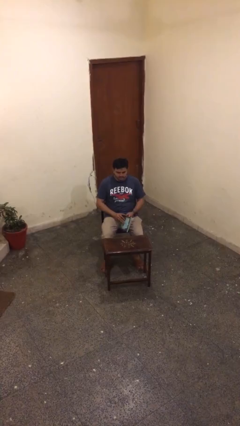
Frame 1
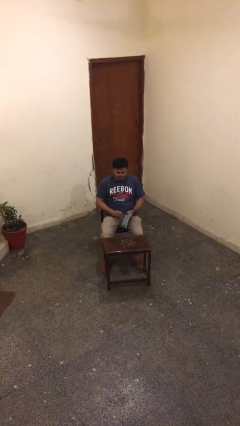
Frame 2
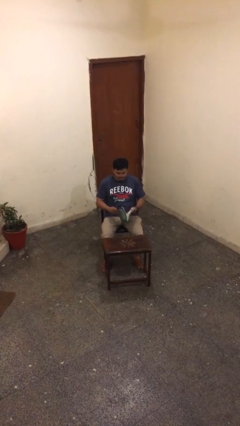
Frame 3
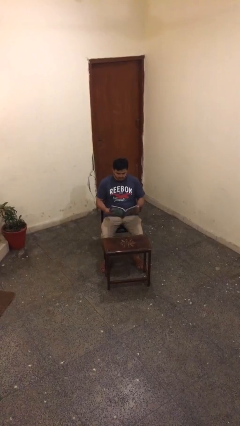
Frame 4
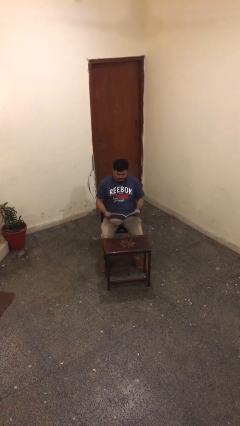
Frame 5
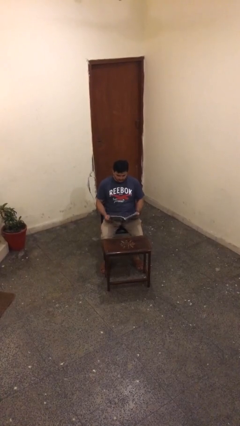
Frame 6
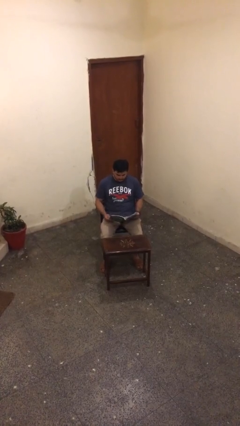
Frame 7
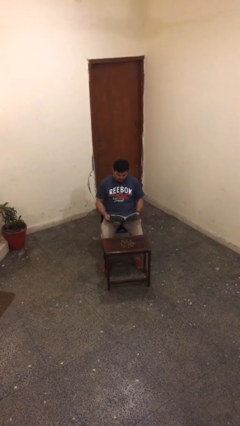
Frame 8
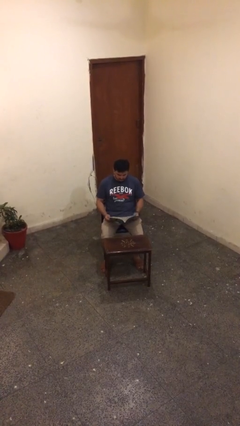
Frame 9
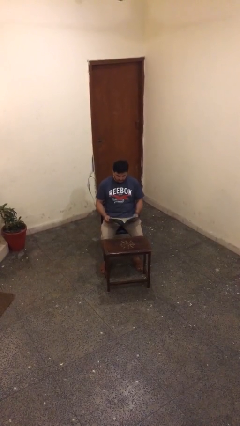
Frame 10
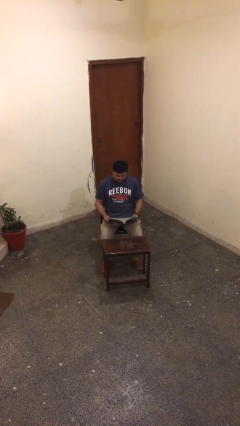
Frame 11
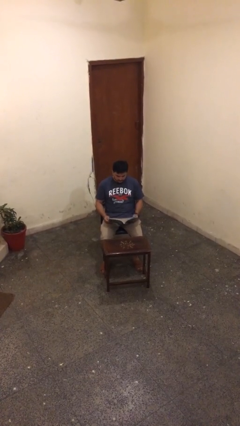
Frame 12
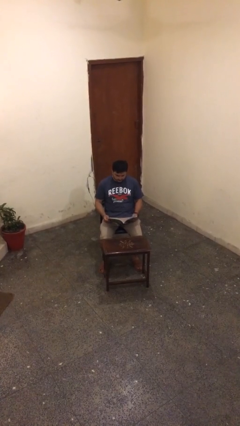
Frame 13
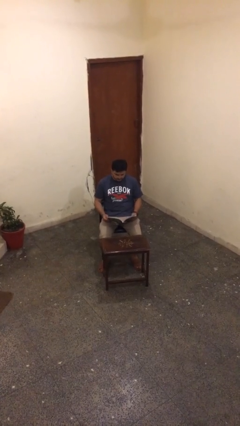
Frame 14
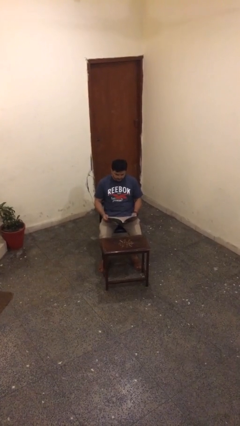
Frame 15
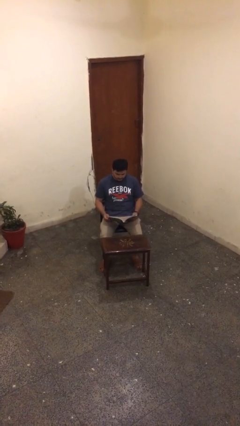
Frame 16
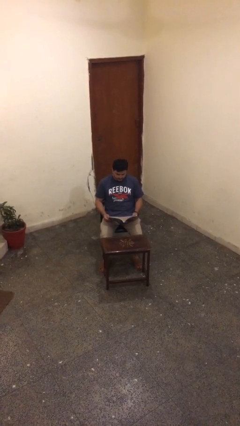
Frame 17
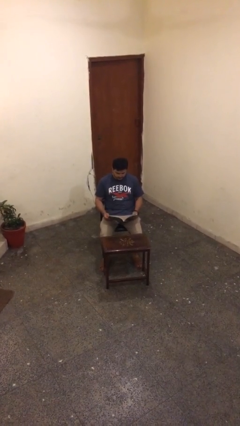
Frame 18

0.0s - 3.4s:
person reads document

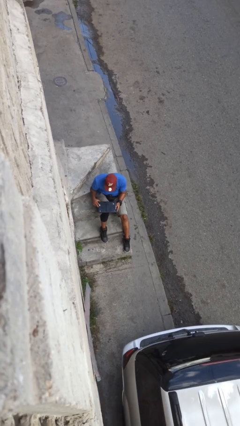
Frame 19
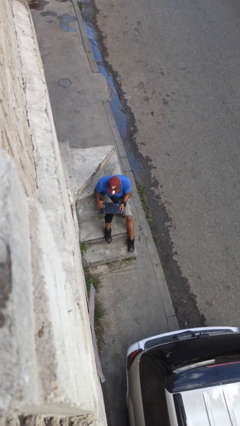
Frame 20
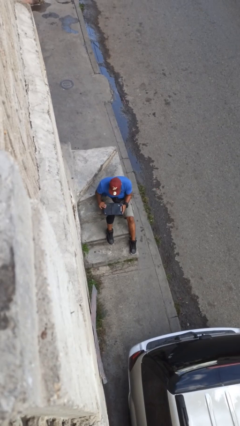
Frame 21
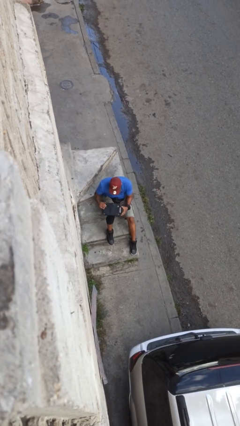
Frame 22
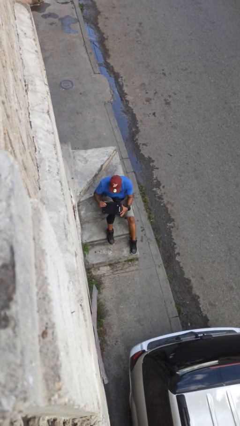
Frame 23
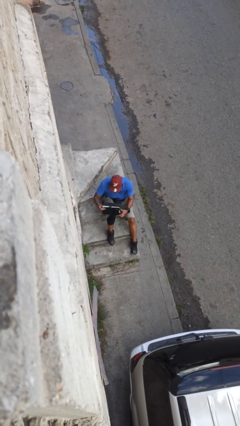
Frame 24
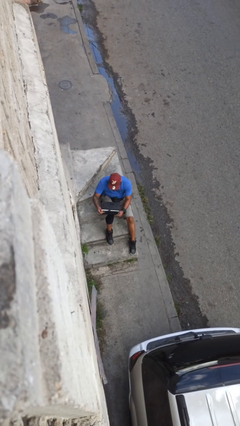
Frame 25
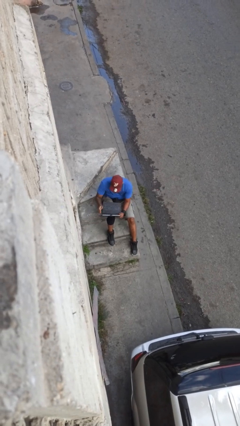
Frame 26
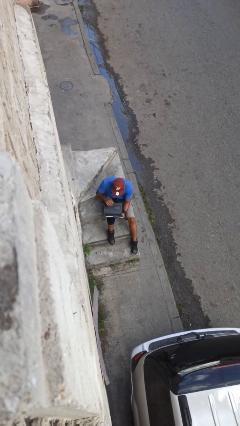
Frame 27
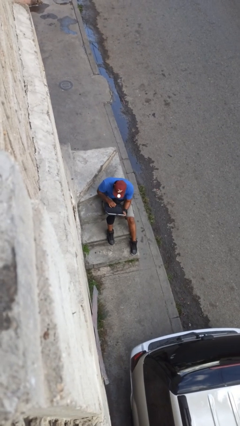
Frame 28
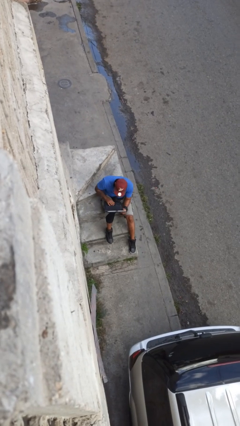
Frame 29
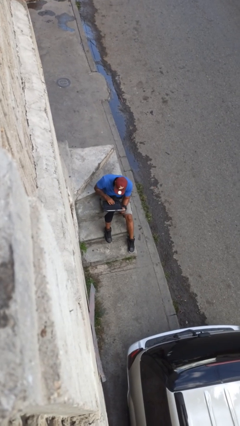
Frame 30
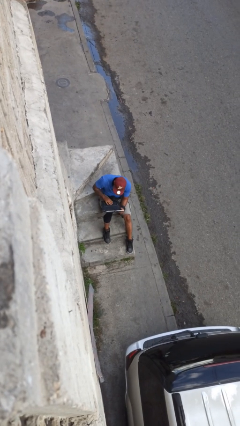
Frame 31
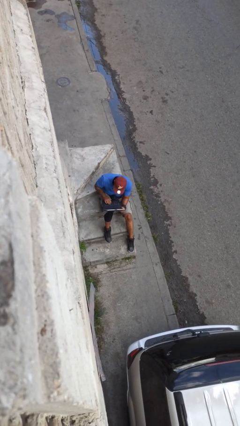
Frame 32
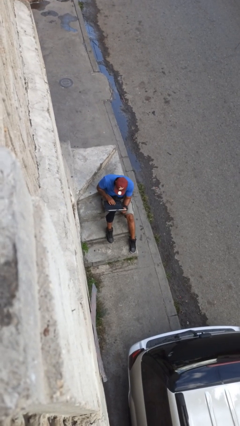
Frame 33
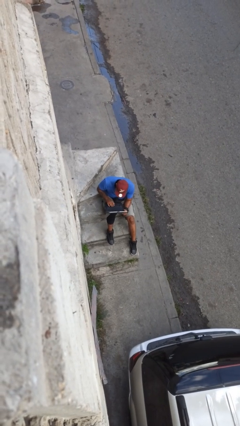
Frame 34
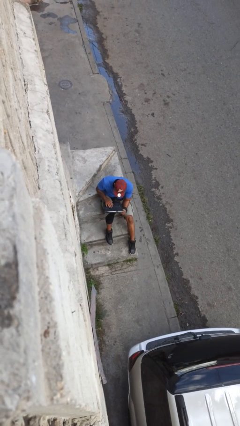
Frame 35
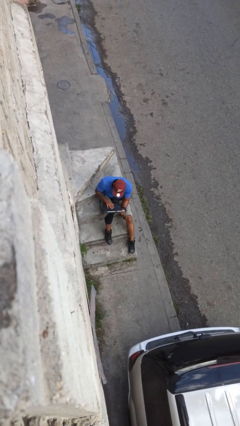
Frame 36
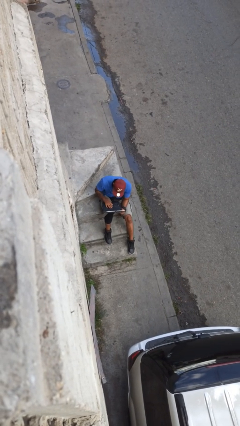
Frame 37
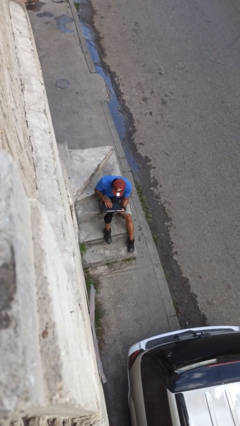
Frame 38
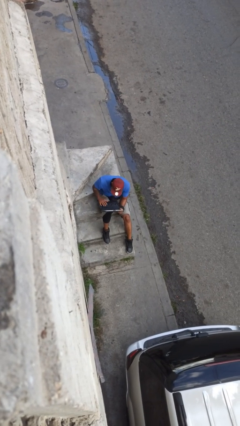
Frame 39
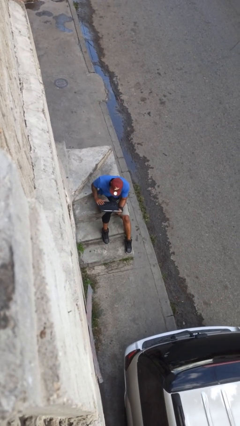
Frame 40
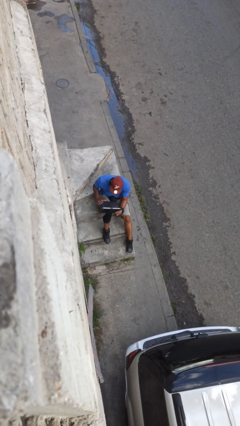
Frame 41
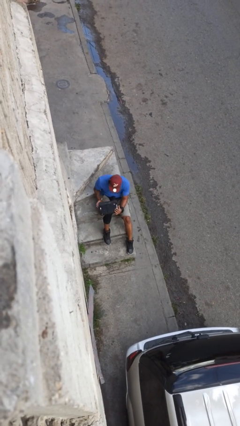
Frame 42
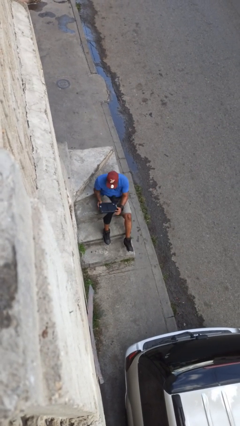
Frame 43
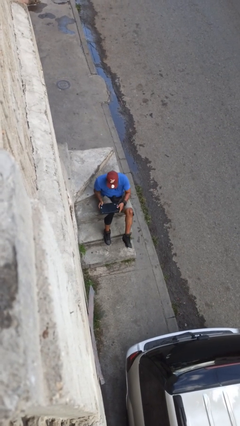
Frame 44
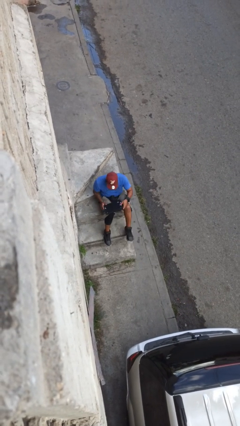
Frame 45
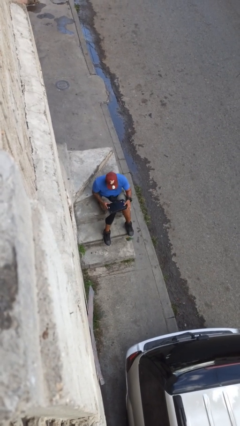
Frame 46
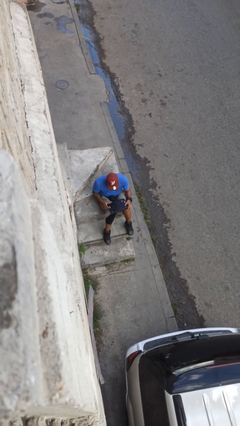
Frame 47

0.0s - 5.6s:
person interacts with laptop

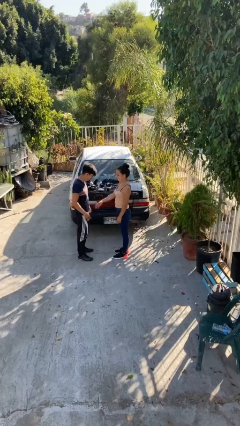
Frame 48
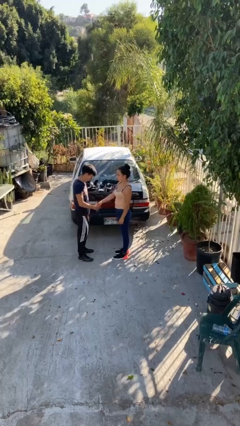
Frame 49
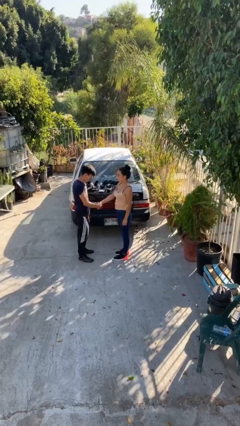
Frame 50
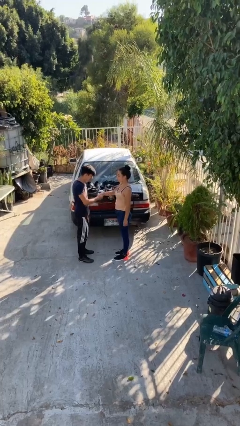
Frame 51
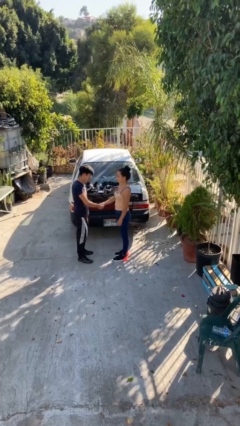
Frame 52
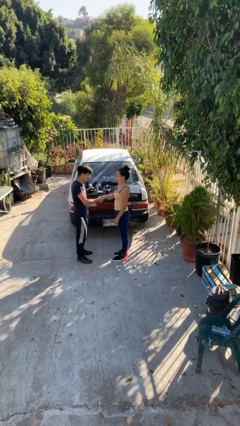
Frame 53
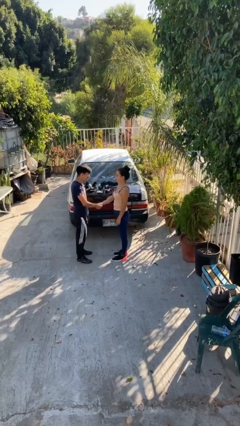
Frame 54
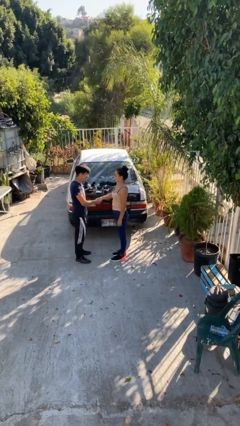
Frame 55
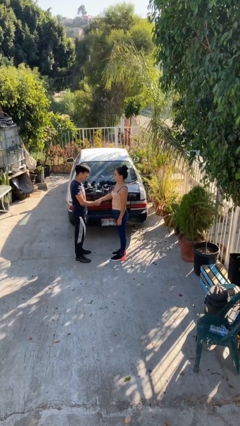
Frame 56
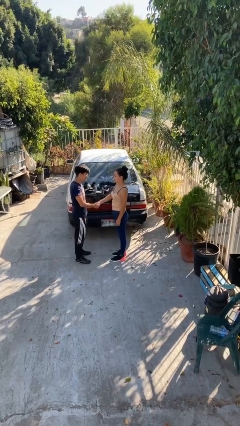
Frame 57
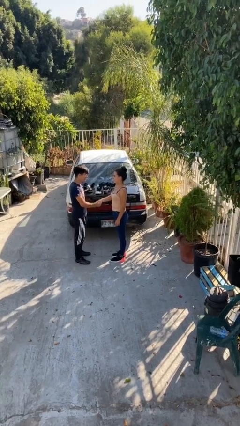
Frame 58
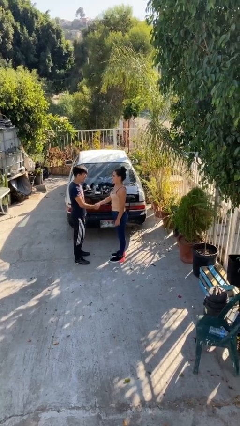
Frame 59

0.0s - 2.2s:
person shakes hand

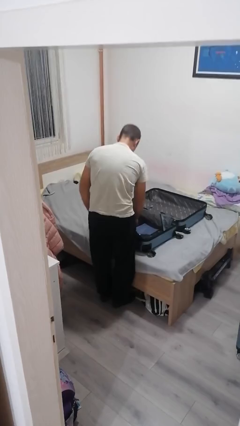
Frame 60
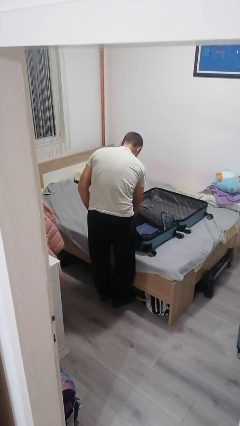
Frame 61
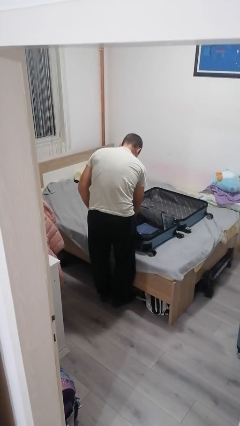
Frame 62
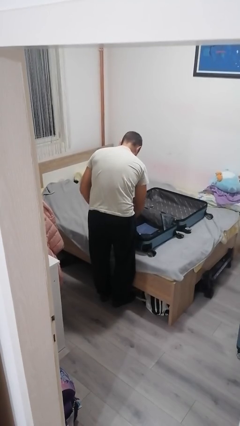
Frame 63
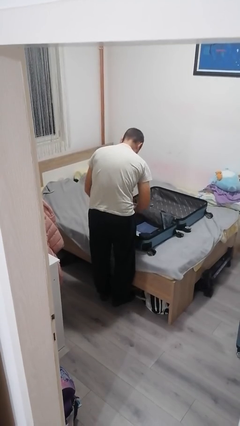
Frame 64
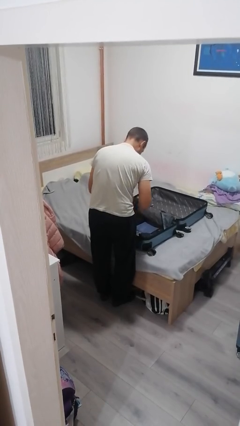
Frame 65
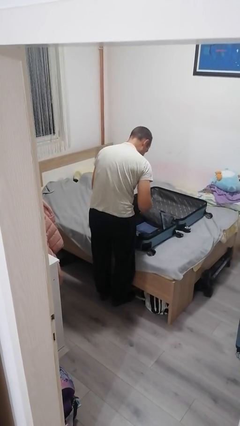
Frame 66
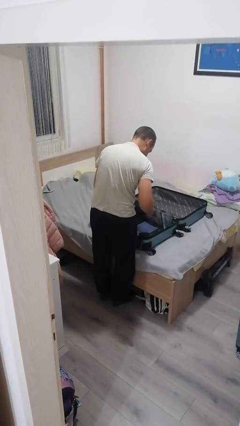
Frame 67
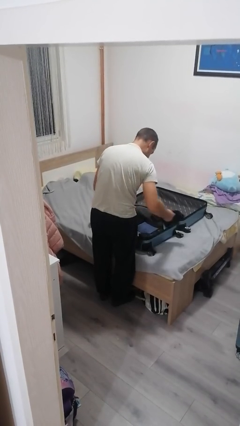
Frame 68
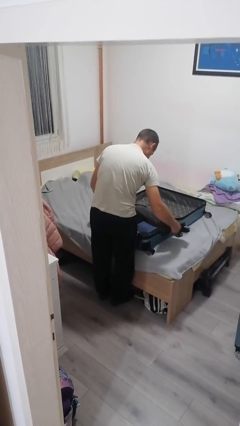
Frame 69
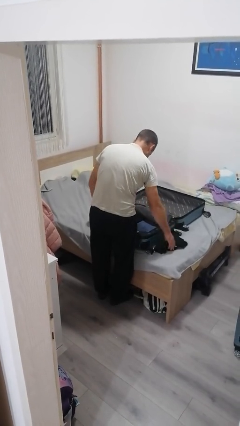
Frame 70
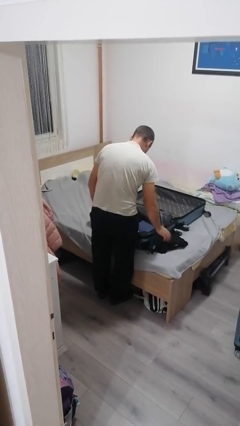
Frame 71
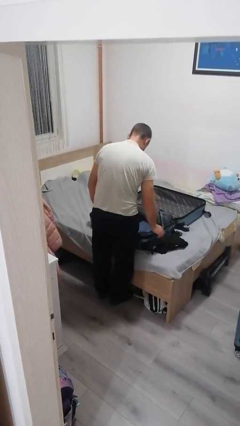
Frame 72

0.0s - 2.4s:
person unloads clothes from suitcase

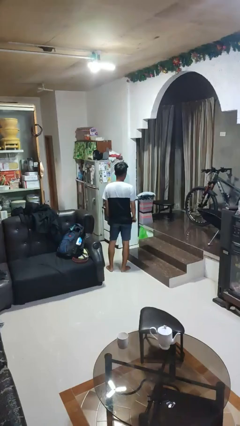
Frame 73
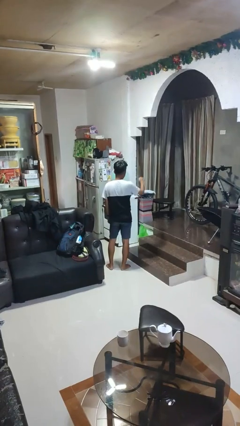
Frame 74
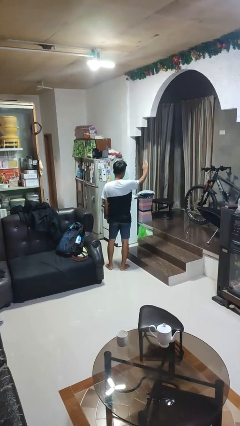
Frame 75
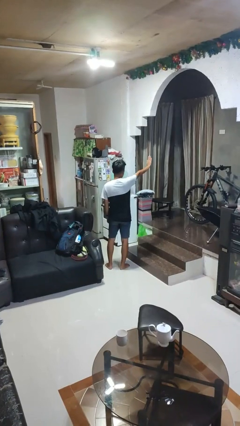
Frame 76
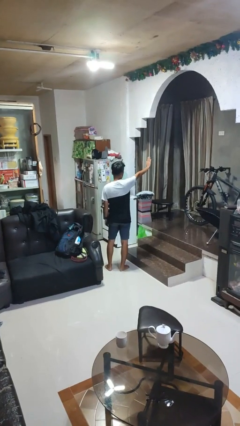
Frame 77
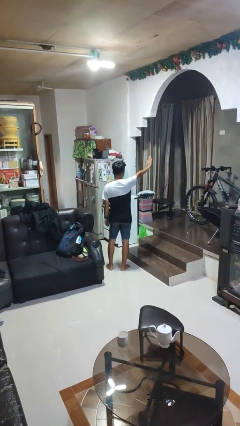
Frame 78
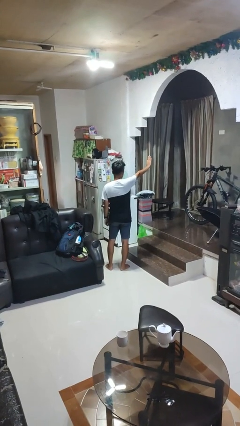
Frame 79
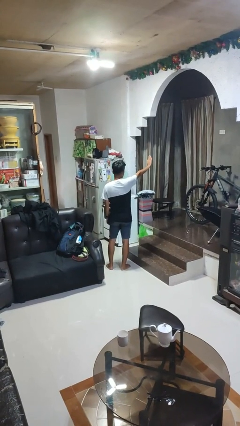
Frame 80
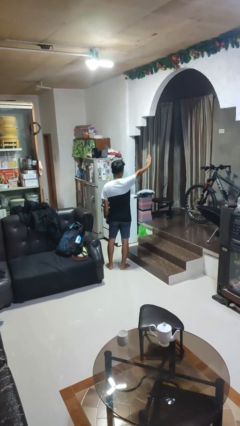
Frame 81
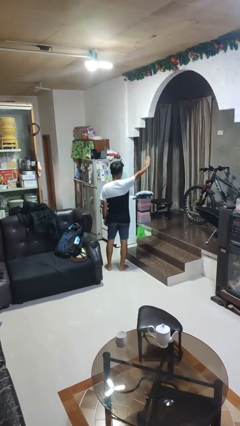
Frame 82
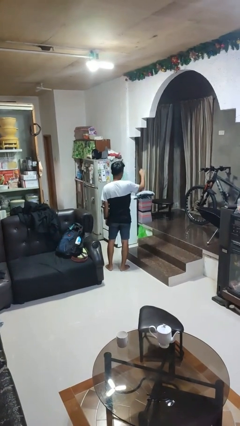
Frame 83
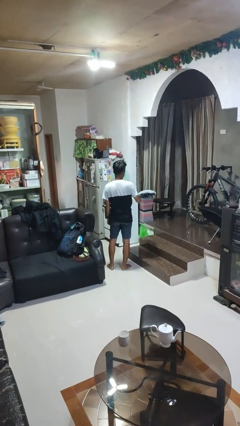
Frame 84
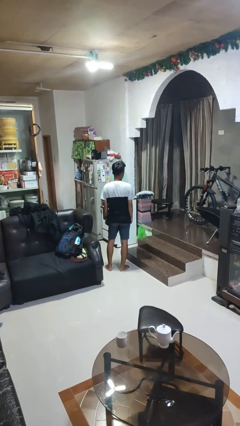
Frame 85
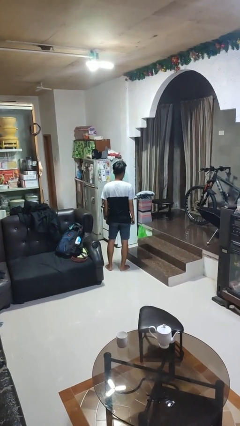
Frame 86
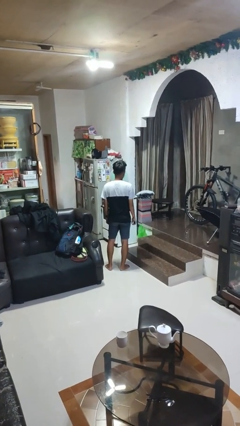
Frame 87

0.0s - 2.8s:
person gestures stop

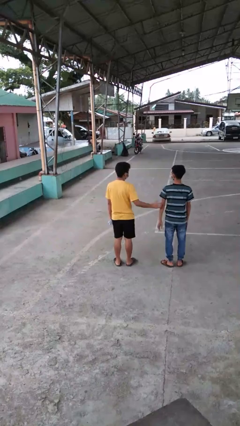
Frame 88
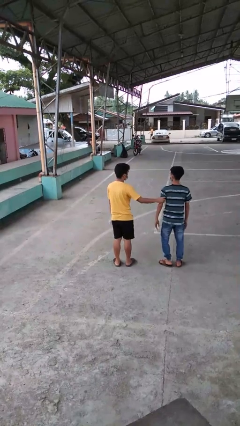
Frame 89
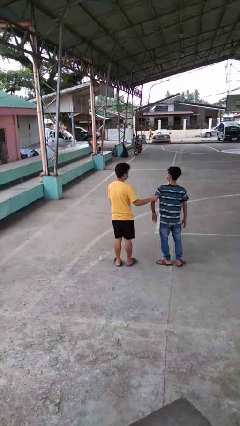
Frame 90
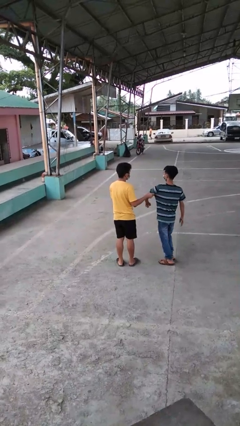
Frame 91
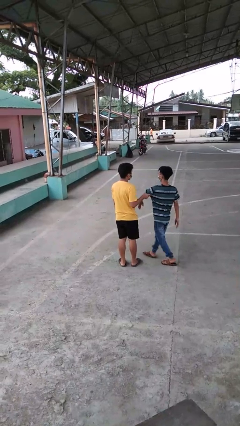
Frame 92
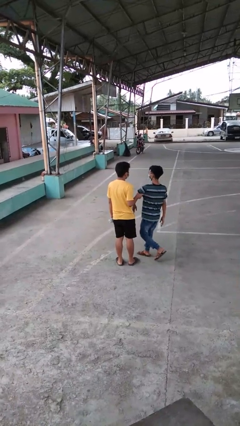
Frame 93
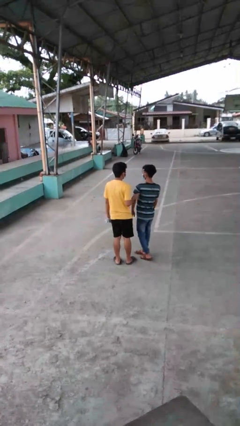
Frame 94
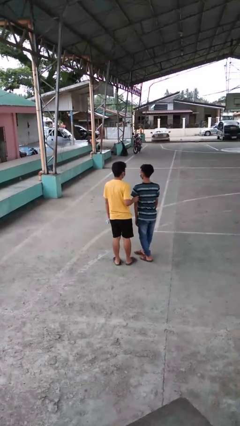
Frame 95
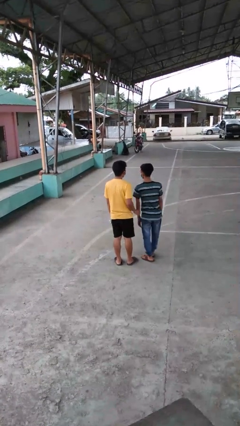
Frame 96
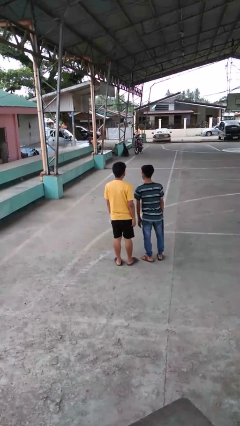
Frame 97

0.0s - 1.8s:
person grabs person by bicep
